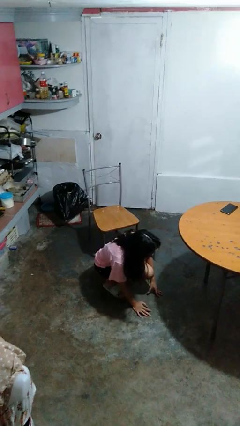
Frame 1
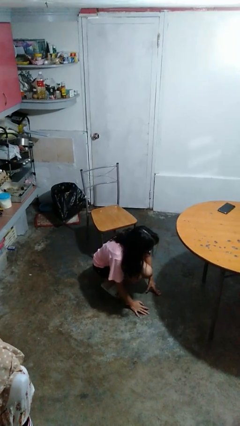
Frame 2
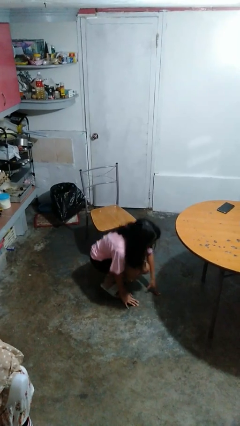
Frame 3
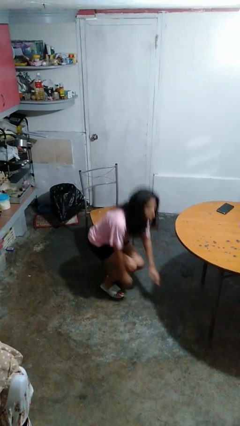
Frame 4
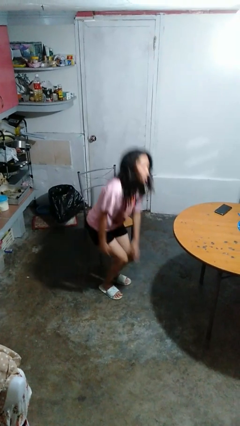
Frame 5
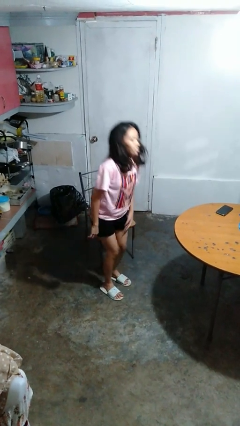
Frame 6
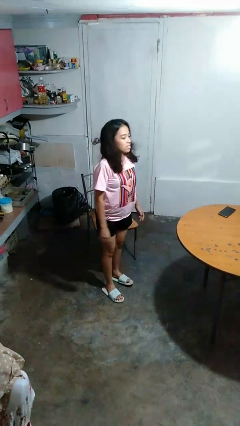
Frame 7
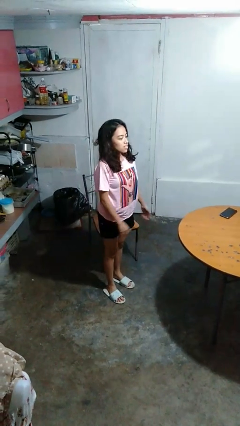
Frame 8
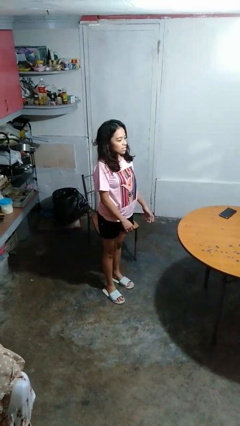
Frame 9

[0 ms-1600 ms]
person stands up from floor

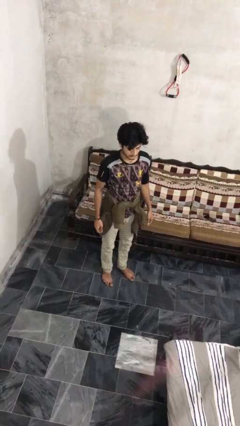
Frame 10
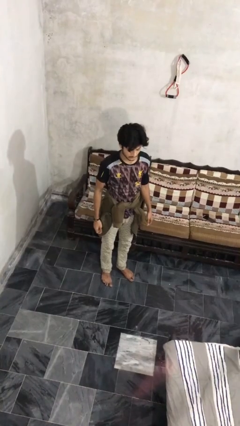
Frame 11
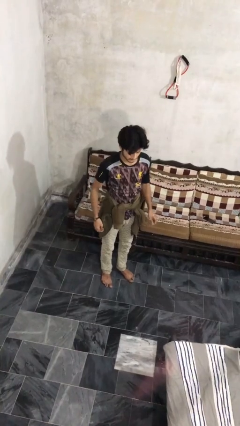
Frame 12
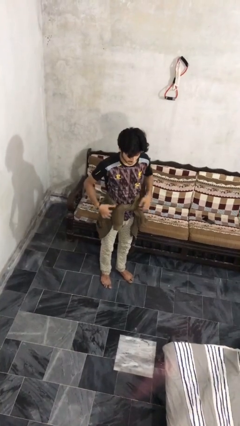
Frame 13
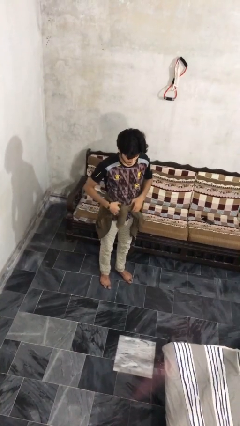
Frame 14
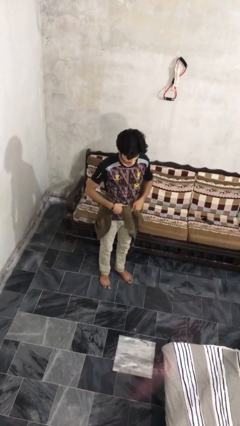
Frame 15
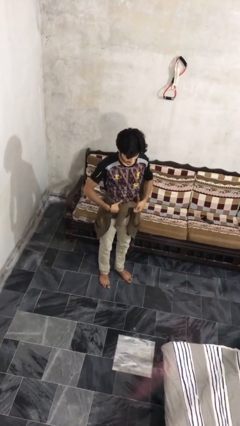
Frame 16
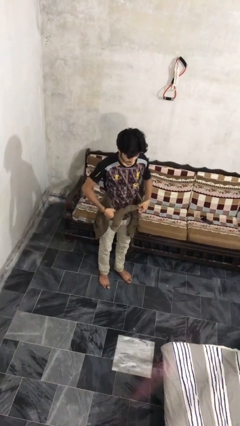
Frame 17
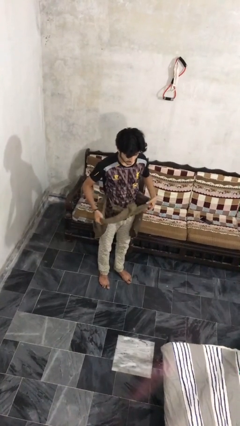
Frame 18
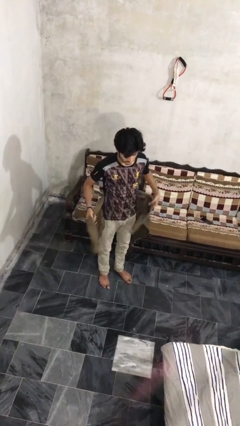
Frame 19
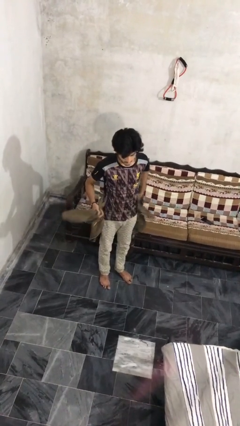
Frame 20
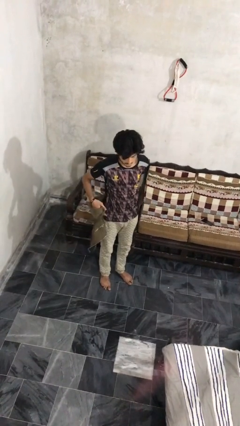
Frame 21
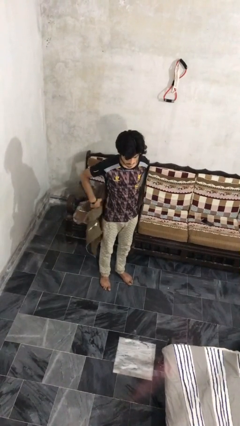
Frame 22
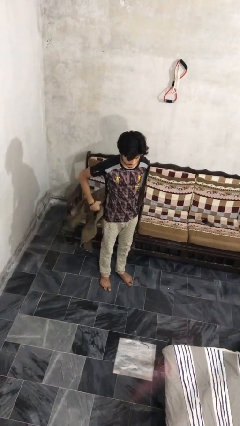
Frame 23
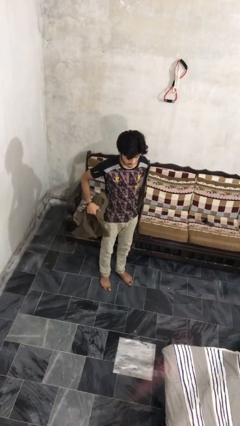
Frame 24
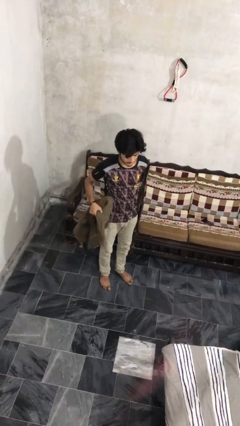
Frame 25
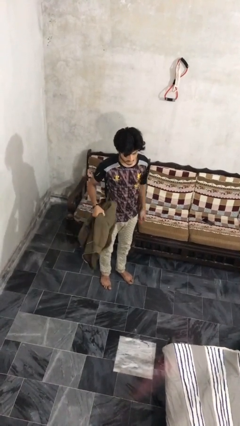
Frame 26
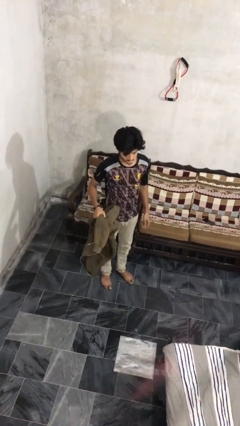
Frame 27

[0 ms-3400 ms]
person unties jacket around waist

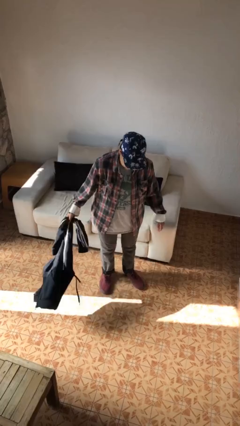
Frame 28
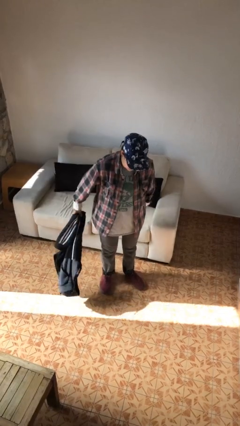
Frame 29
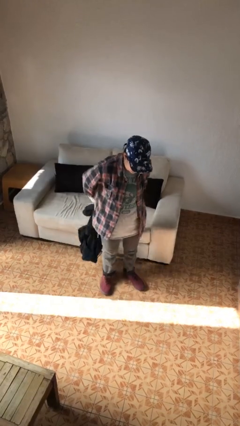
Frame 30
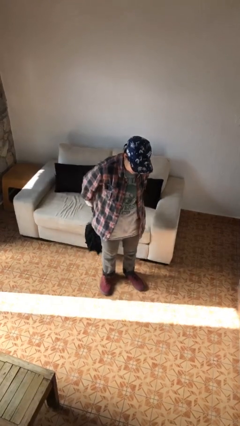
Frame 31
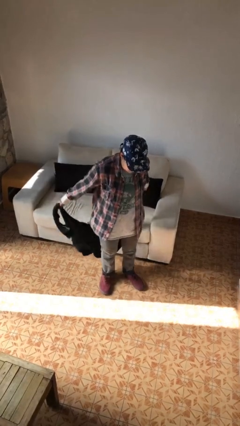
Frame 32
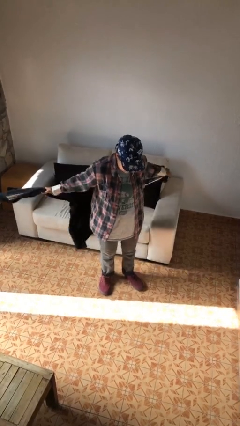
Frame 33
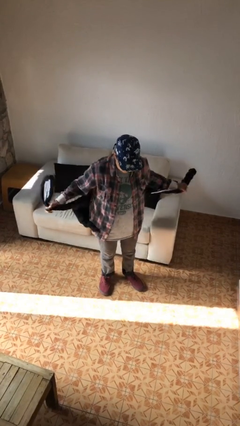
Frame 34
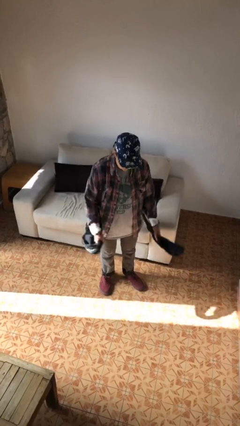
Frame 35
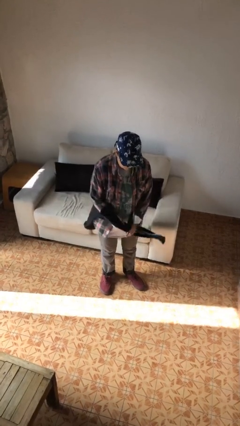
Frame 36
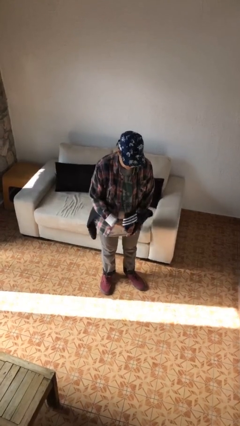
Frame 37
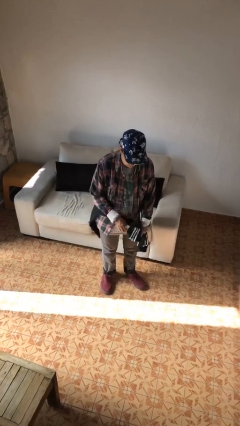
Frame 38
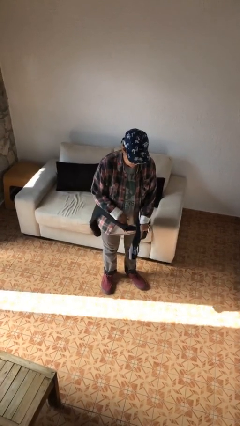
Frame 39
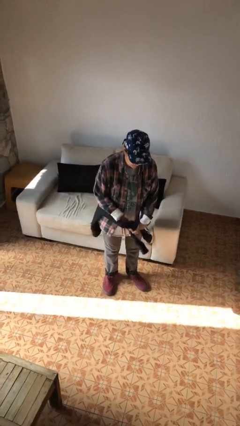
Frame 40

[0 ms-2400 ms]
person ties jacket around waist

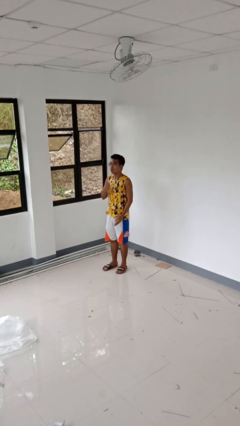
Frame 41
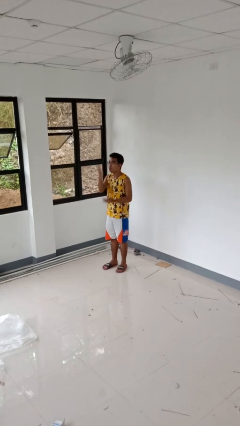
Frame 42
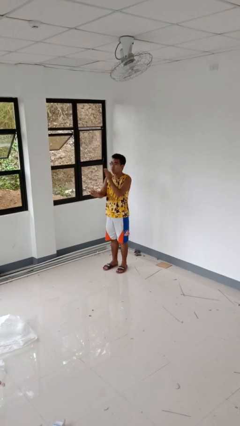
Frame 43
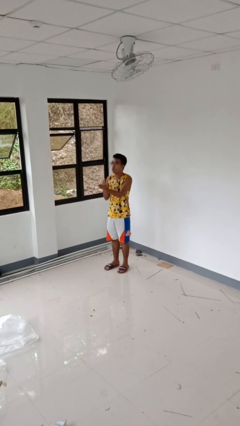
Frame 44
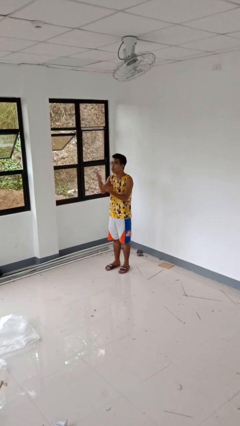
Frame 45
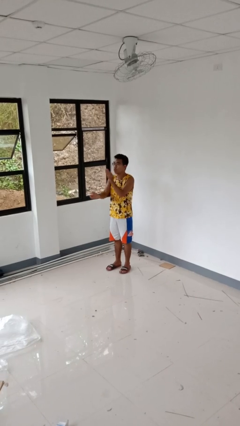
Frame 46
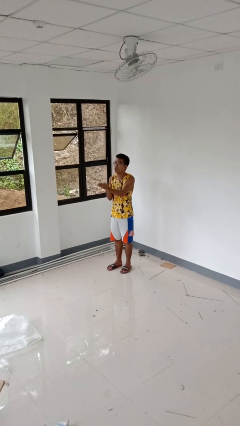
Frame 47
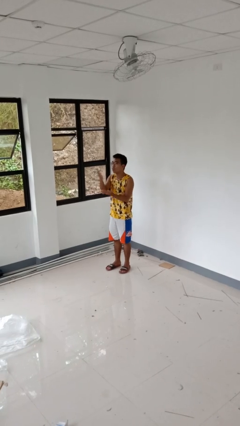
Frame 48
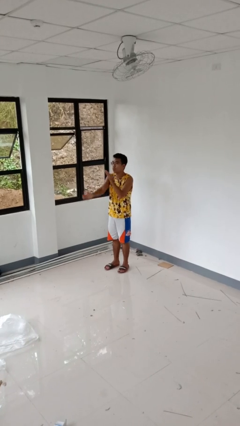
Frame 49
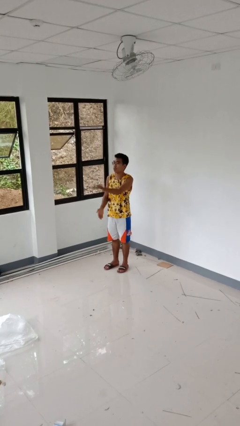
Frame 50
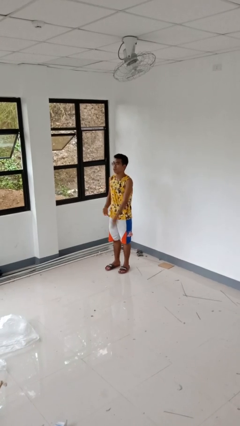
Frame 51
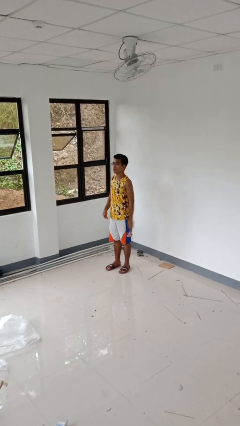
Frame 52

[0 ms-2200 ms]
person gestures blow kiss

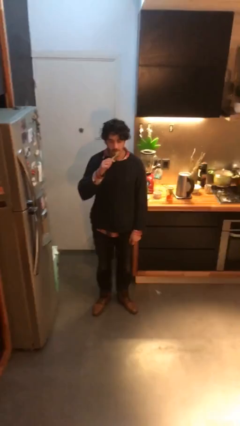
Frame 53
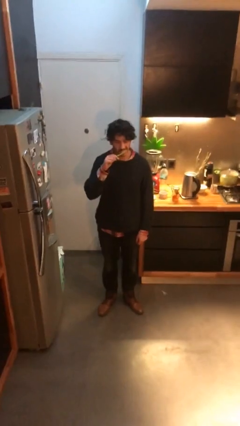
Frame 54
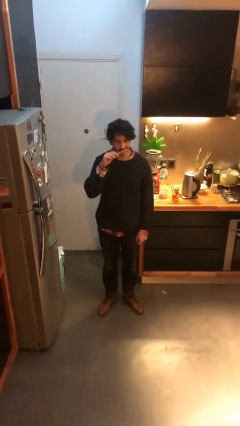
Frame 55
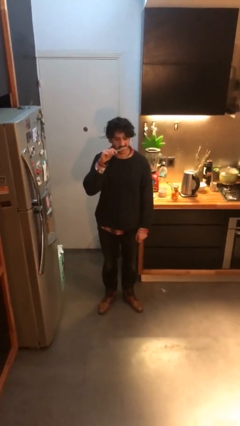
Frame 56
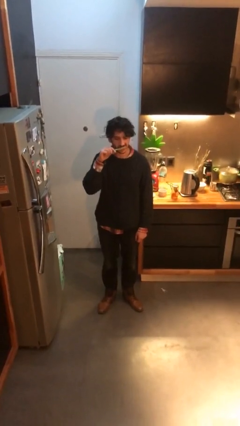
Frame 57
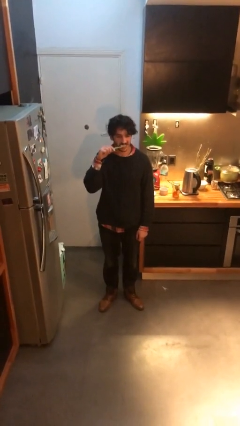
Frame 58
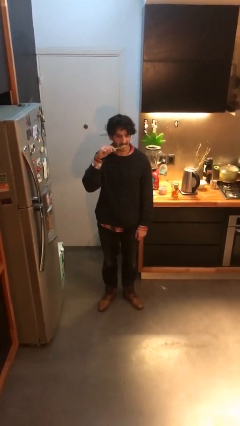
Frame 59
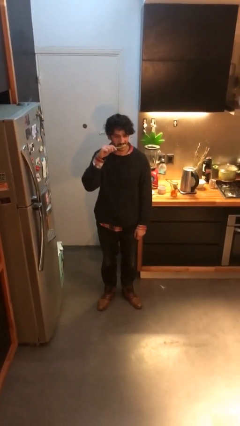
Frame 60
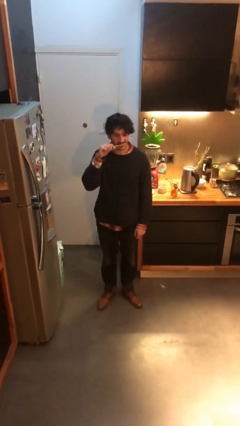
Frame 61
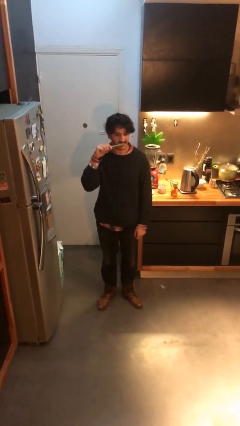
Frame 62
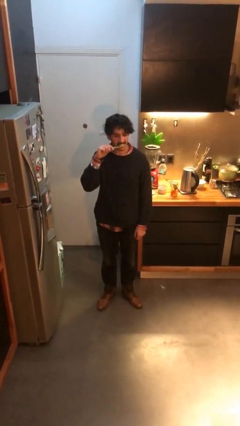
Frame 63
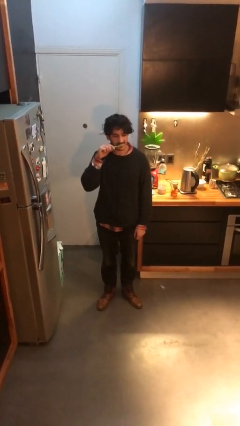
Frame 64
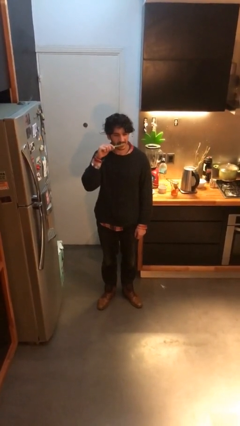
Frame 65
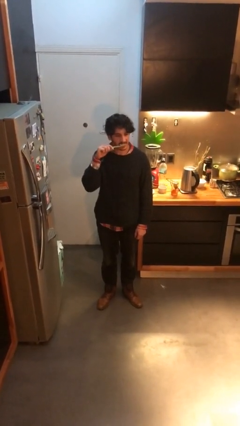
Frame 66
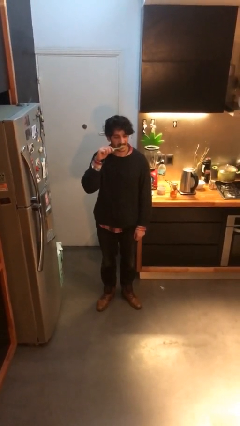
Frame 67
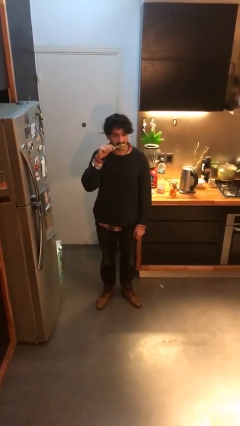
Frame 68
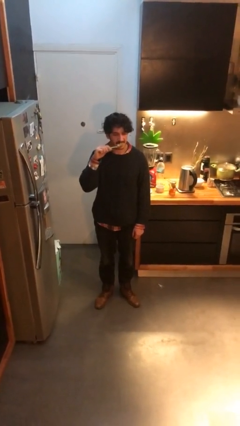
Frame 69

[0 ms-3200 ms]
person brushes teeth

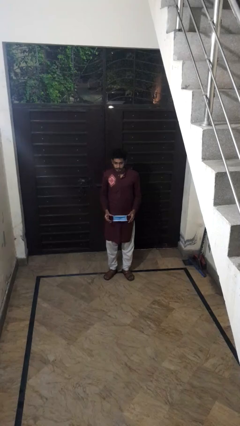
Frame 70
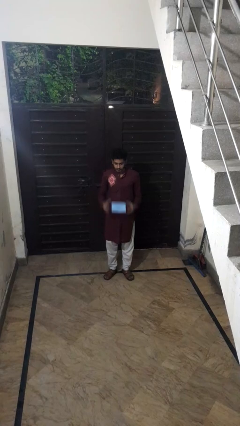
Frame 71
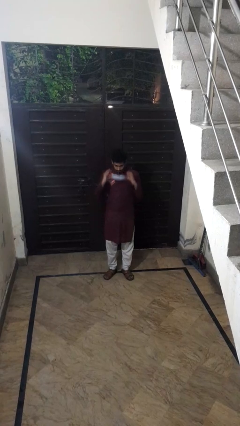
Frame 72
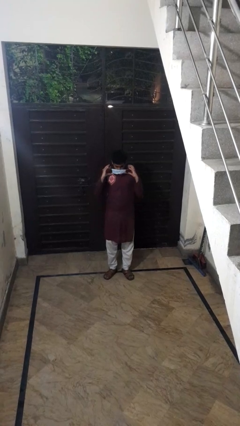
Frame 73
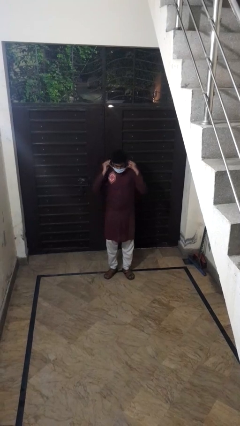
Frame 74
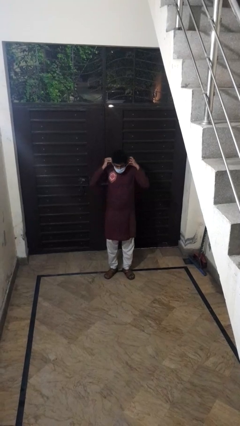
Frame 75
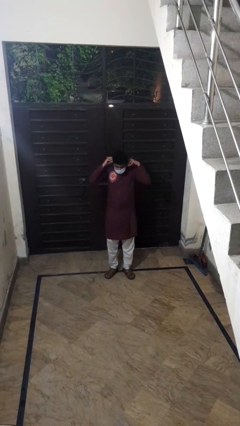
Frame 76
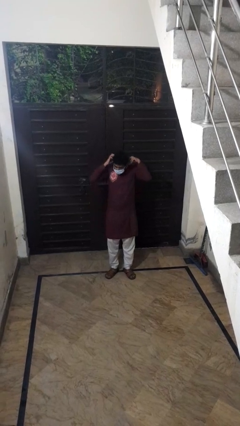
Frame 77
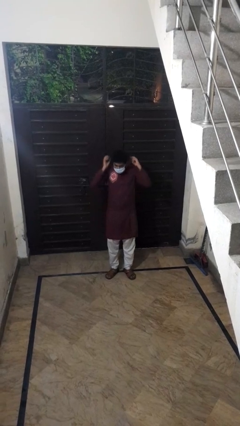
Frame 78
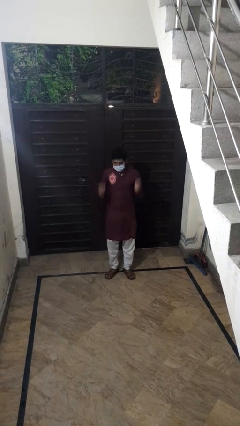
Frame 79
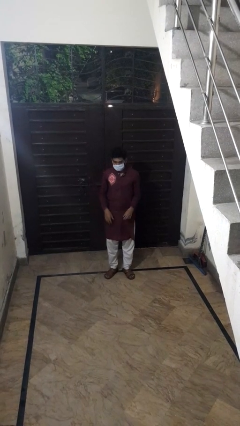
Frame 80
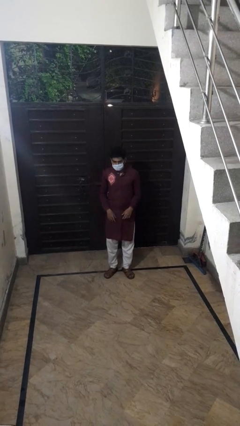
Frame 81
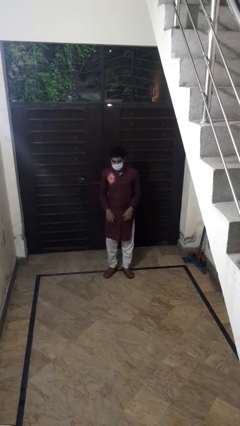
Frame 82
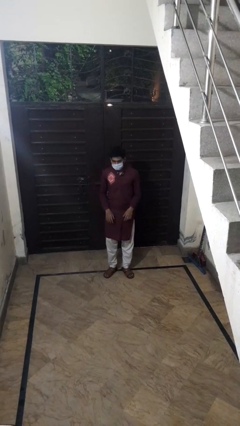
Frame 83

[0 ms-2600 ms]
person puts on facemask

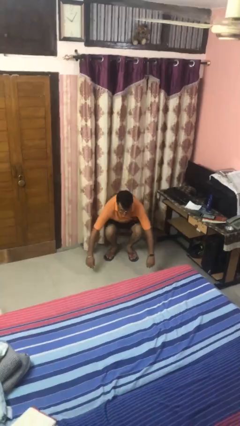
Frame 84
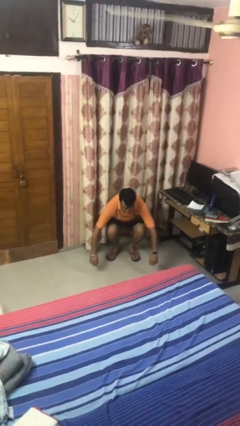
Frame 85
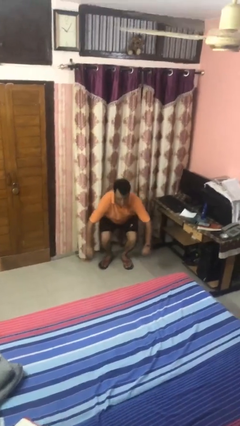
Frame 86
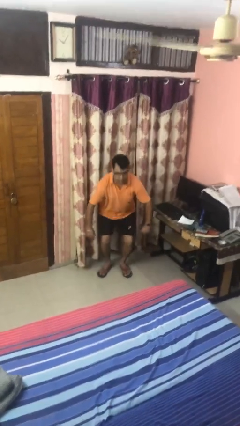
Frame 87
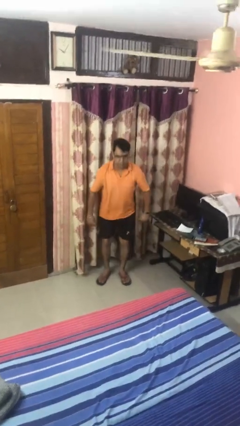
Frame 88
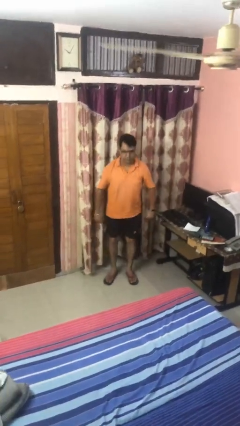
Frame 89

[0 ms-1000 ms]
person stands up

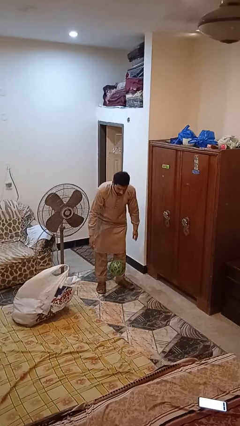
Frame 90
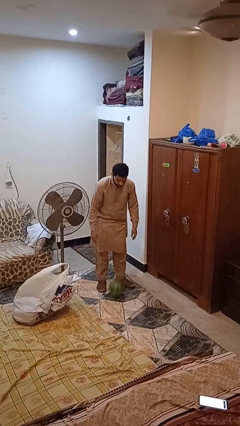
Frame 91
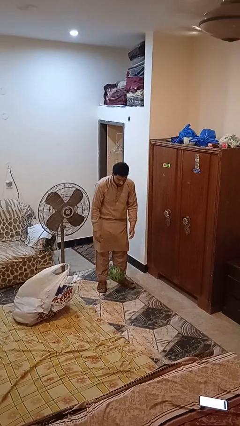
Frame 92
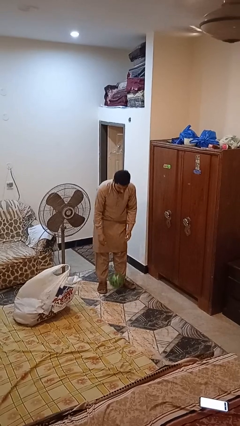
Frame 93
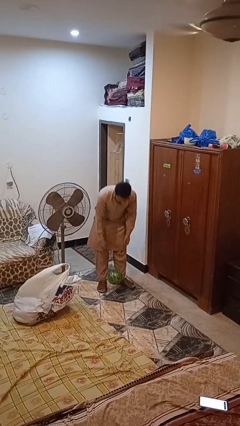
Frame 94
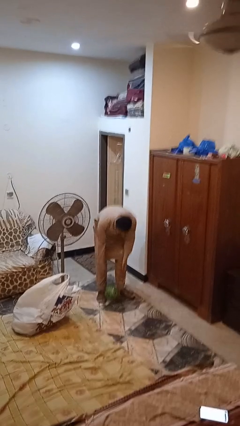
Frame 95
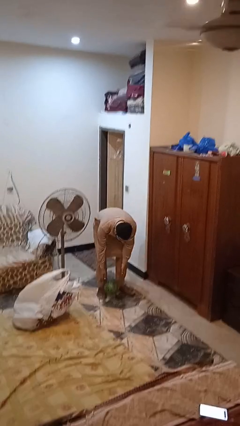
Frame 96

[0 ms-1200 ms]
person catches dropped object
